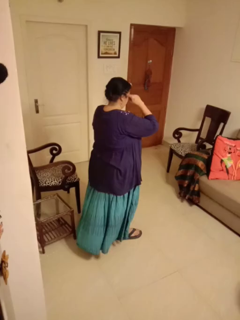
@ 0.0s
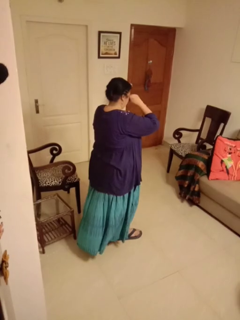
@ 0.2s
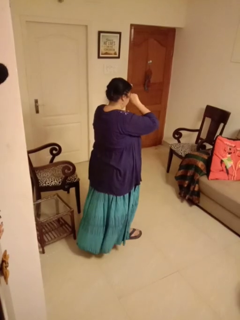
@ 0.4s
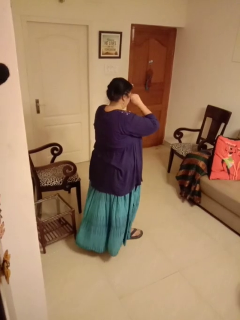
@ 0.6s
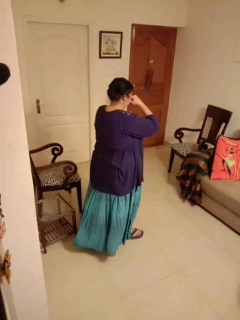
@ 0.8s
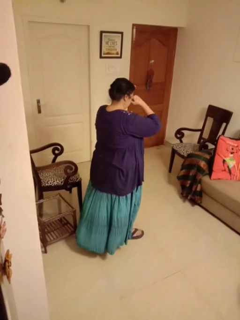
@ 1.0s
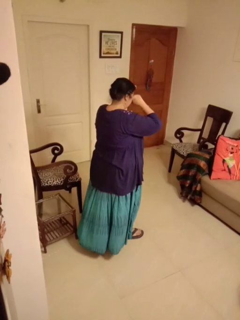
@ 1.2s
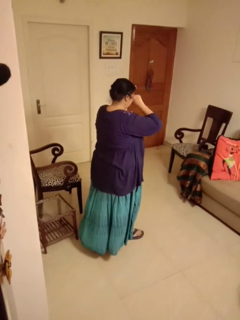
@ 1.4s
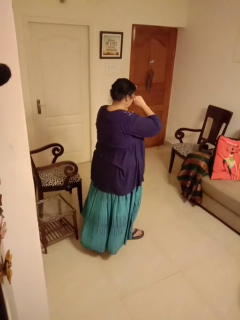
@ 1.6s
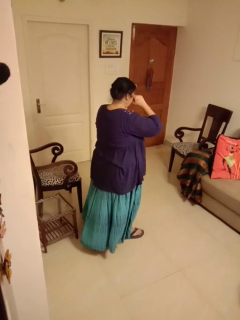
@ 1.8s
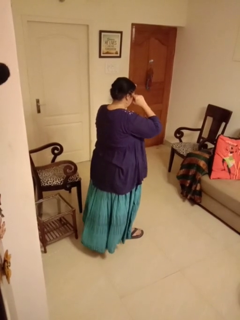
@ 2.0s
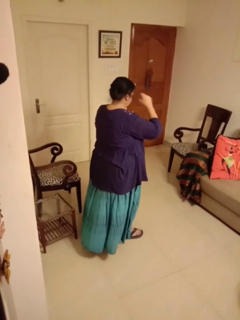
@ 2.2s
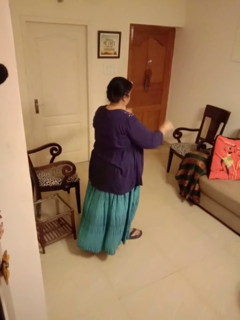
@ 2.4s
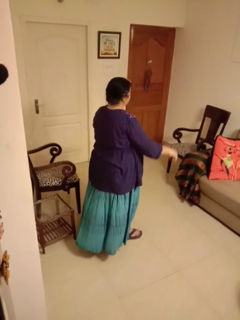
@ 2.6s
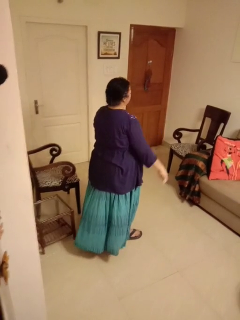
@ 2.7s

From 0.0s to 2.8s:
person rubs eyes

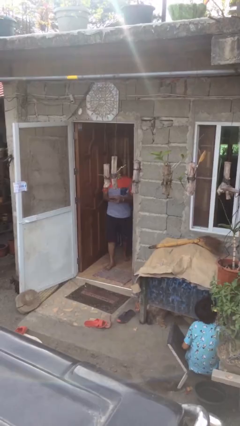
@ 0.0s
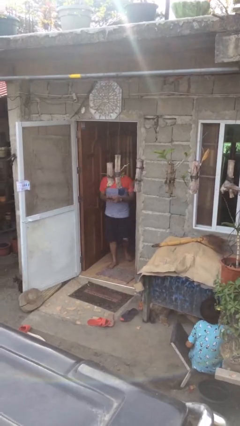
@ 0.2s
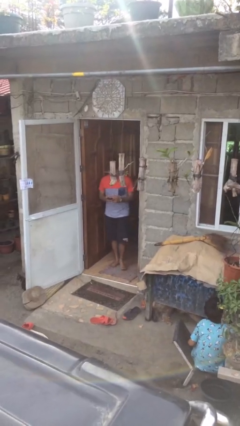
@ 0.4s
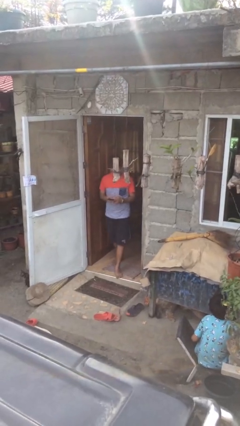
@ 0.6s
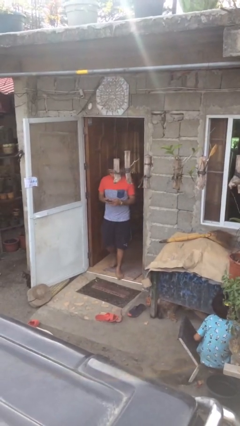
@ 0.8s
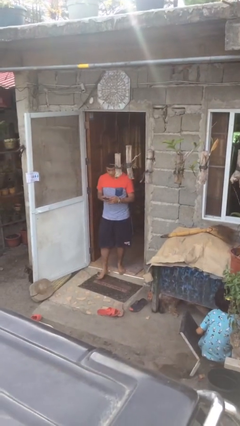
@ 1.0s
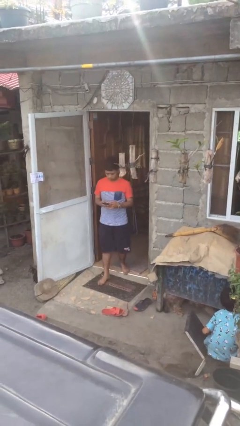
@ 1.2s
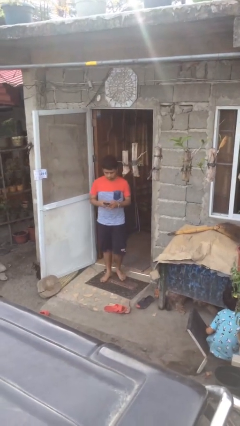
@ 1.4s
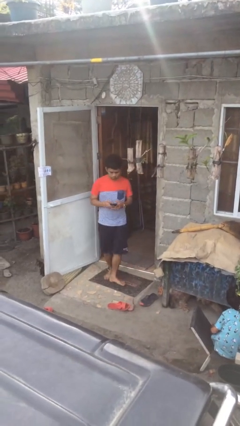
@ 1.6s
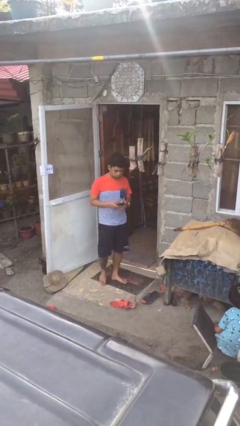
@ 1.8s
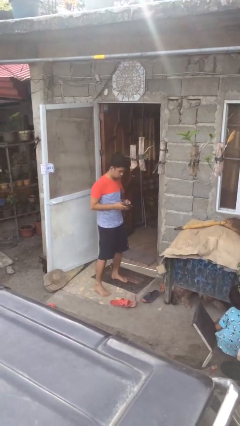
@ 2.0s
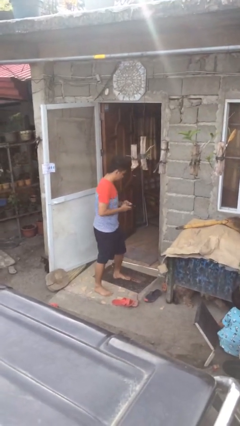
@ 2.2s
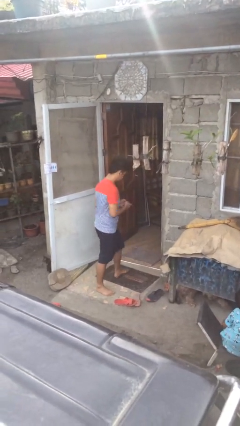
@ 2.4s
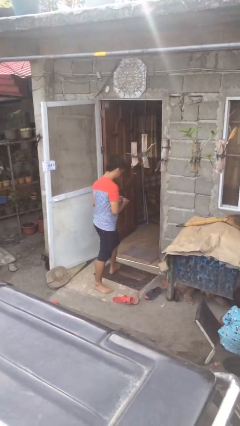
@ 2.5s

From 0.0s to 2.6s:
person enters scene through structure

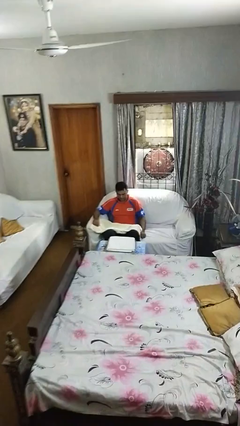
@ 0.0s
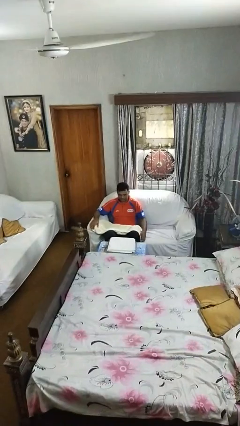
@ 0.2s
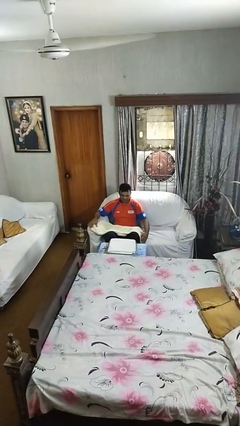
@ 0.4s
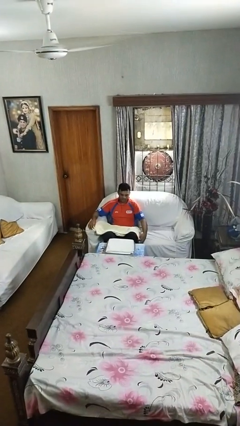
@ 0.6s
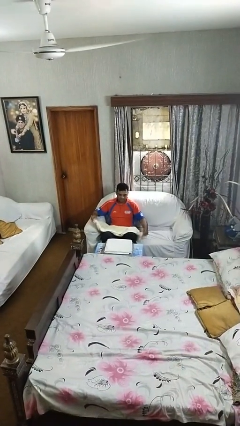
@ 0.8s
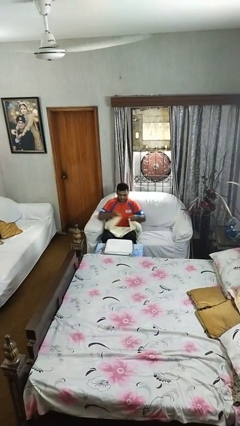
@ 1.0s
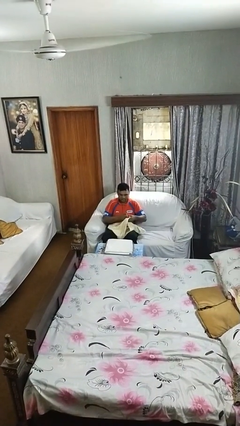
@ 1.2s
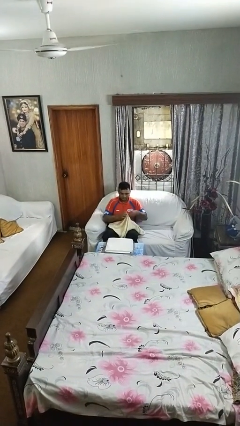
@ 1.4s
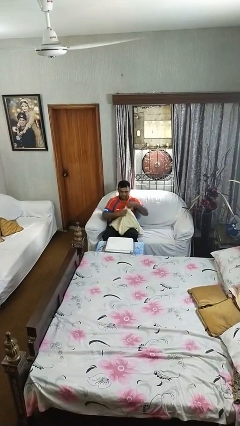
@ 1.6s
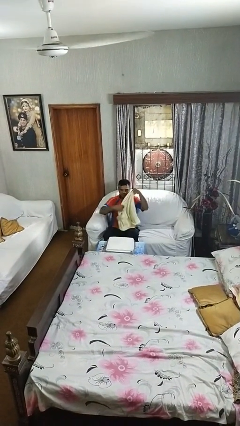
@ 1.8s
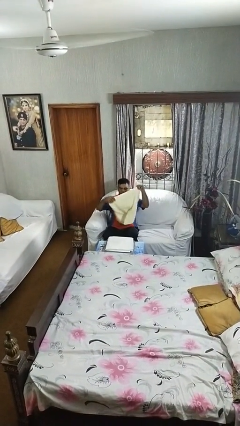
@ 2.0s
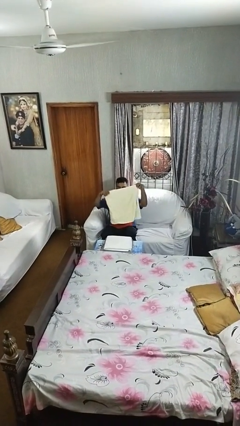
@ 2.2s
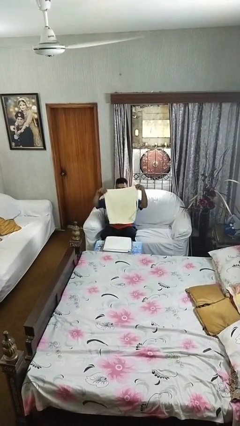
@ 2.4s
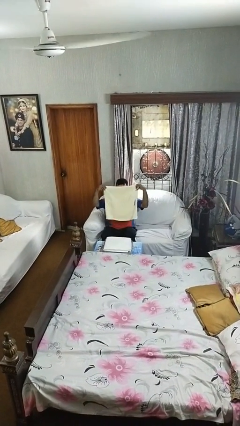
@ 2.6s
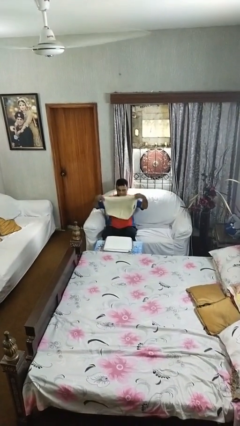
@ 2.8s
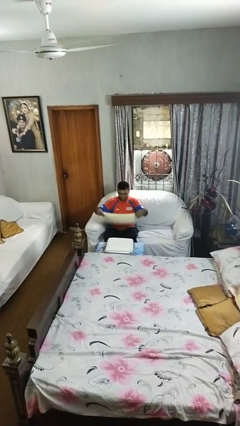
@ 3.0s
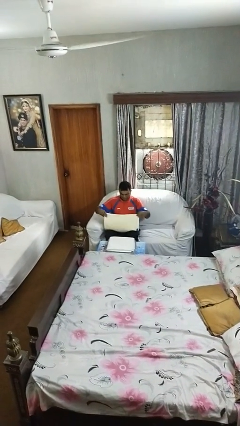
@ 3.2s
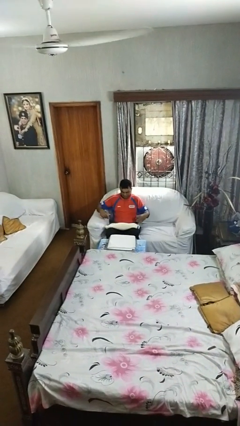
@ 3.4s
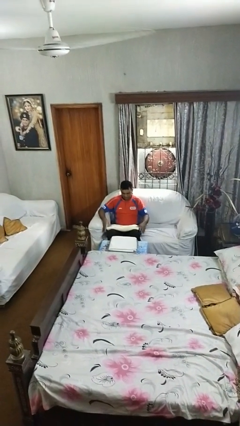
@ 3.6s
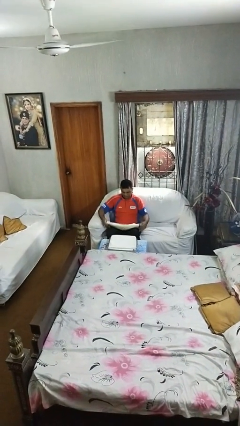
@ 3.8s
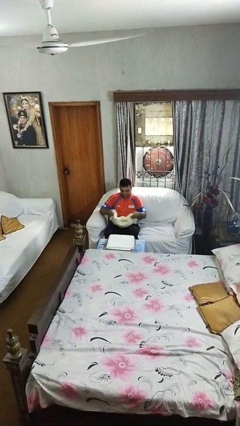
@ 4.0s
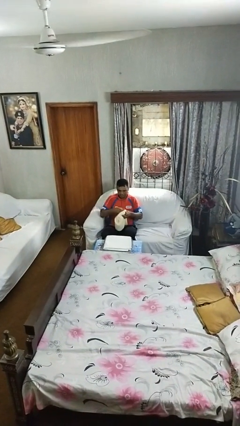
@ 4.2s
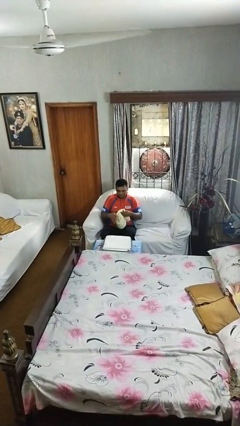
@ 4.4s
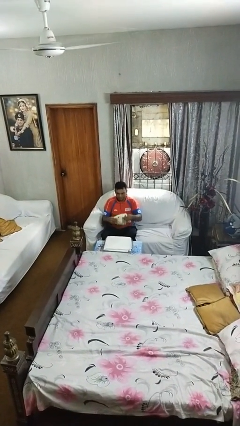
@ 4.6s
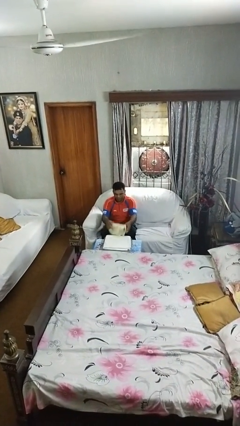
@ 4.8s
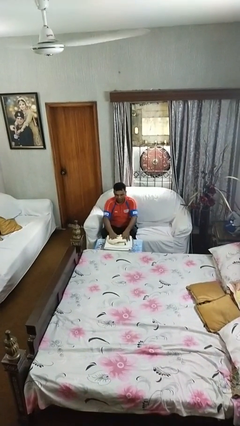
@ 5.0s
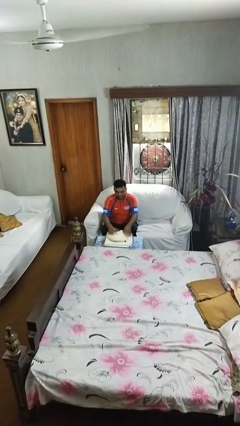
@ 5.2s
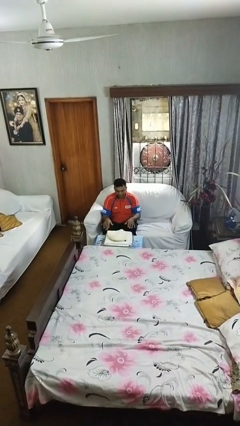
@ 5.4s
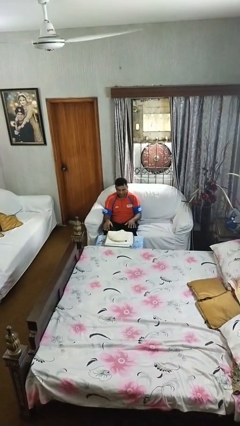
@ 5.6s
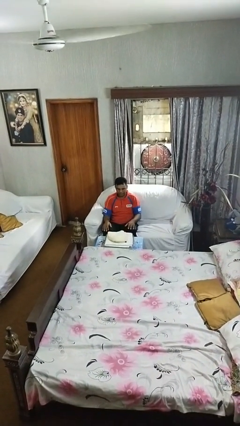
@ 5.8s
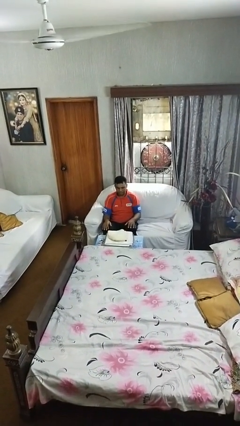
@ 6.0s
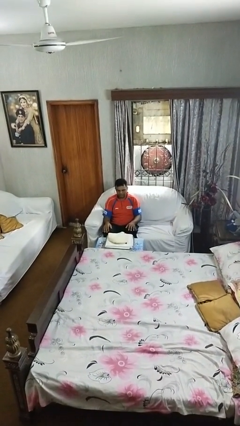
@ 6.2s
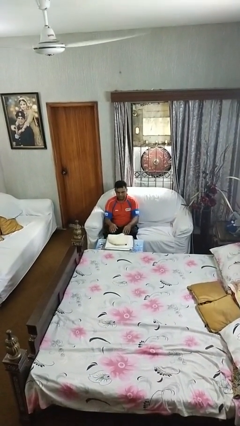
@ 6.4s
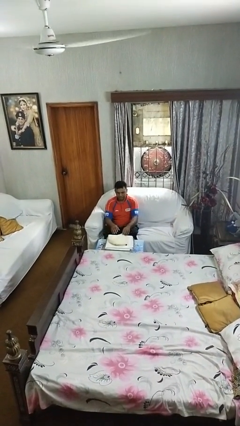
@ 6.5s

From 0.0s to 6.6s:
person folds towel

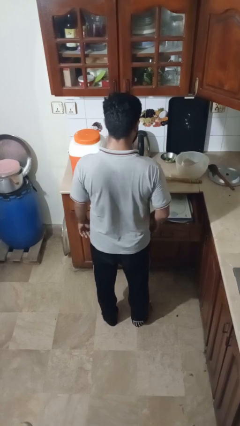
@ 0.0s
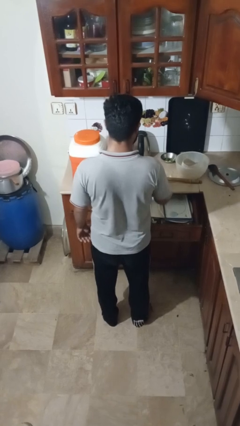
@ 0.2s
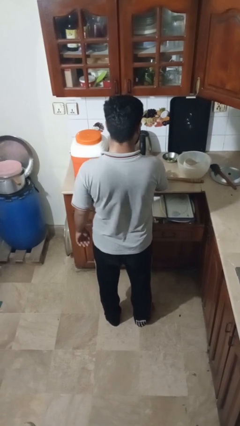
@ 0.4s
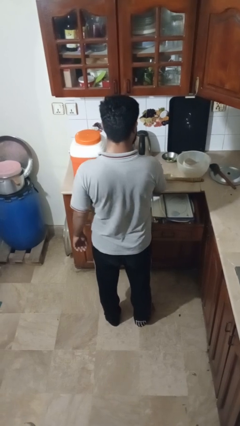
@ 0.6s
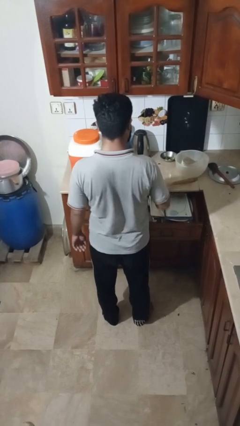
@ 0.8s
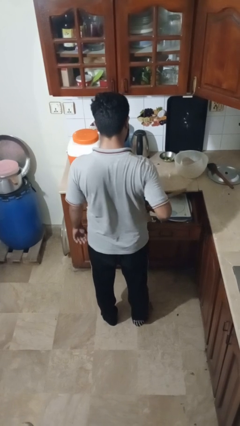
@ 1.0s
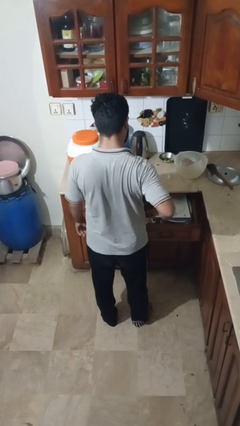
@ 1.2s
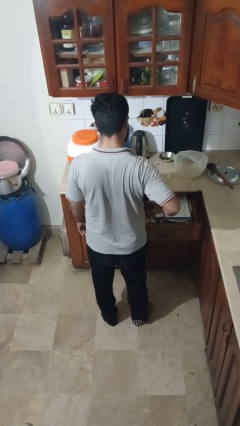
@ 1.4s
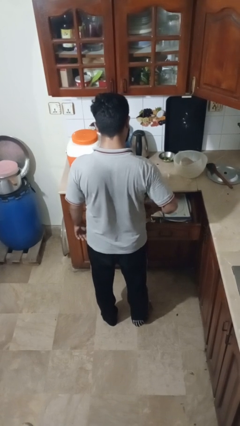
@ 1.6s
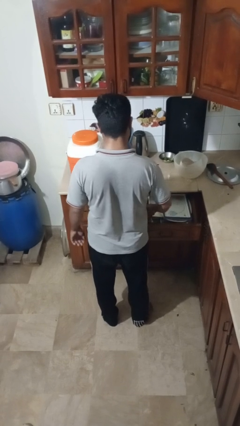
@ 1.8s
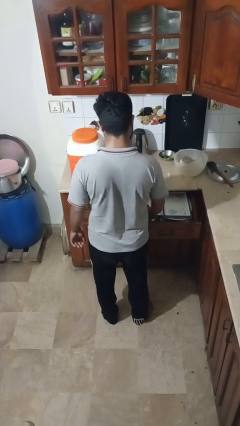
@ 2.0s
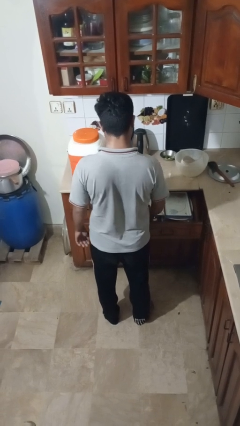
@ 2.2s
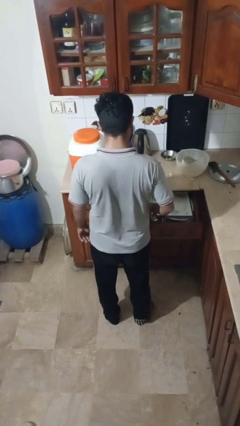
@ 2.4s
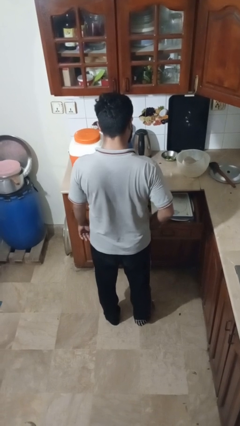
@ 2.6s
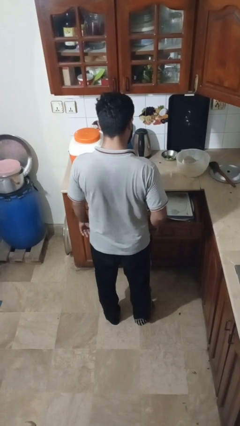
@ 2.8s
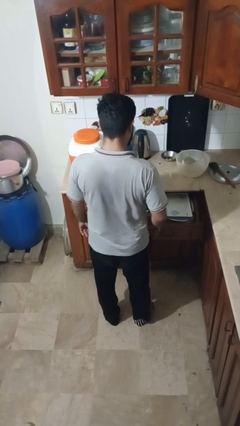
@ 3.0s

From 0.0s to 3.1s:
person puts object into kitchen drawer

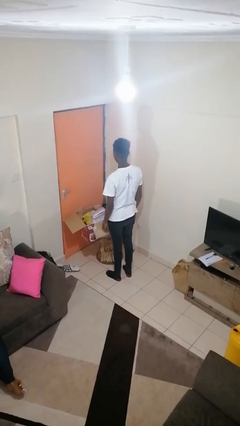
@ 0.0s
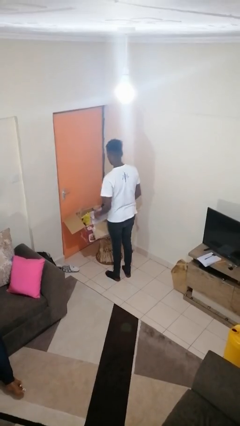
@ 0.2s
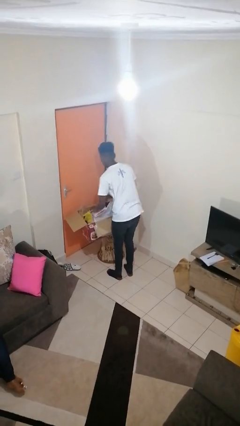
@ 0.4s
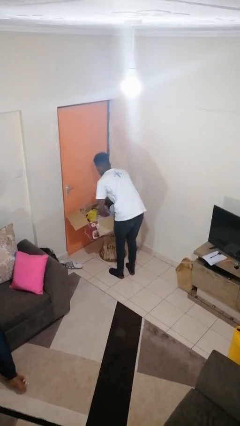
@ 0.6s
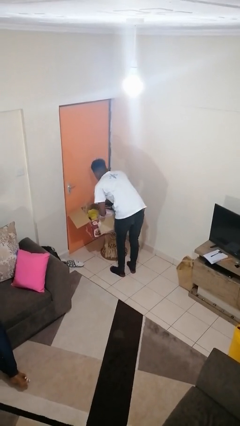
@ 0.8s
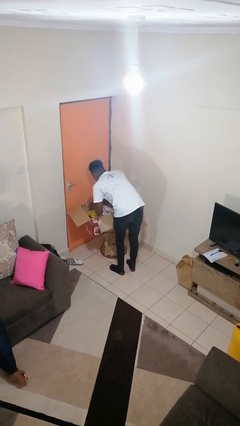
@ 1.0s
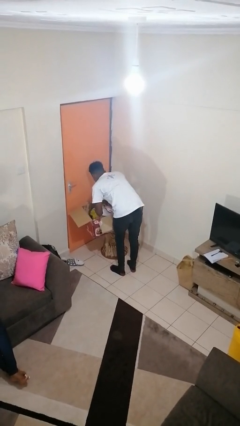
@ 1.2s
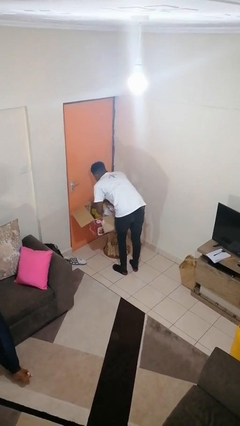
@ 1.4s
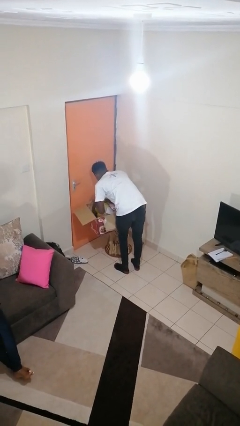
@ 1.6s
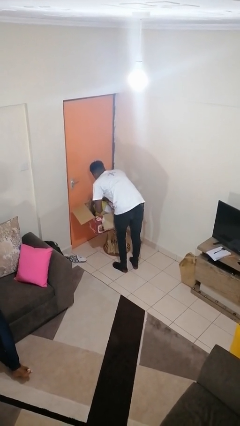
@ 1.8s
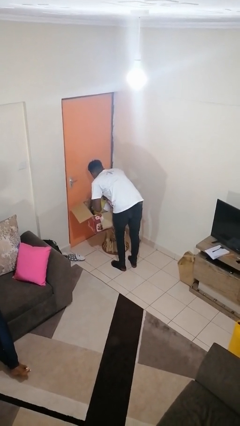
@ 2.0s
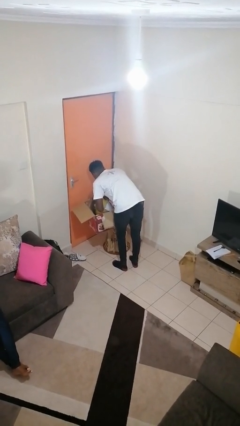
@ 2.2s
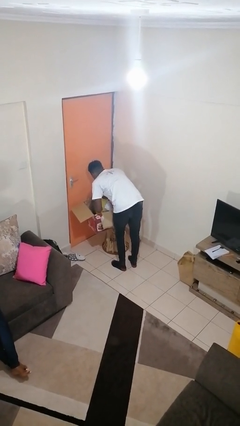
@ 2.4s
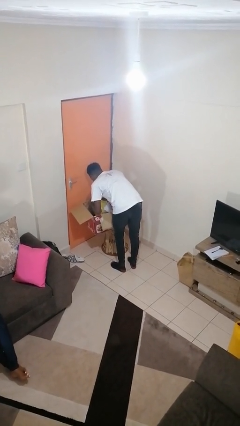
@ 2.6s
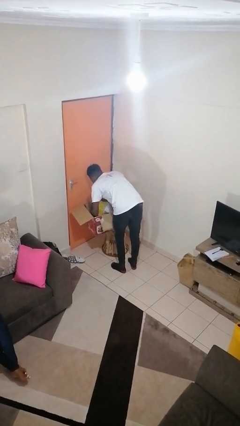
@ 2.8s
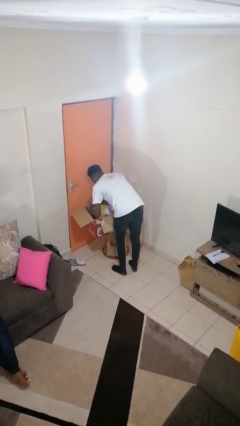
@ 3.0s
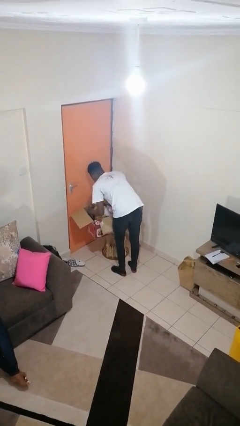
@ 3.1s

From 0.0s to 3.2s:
person searches in box

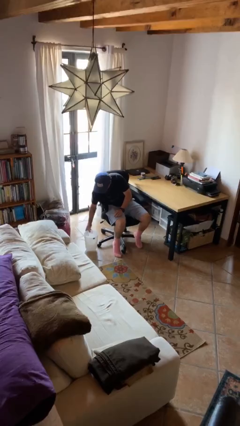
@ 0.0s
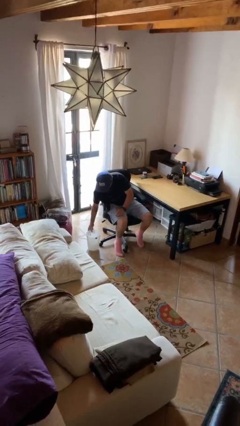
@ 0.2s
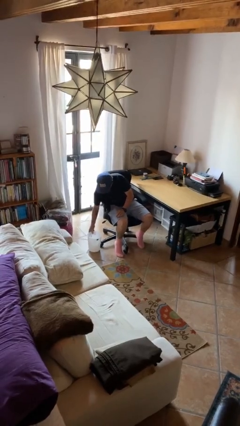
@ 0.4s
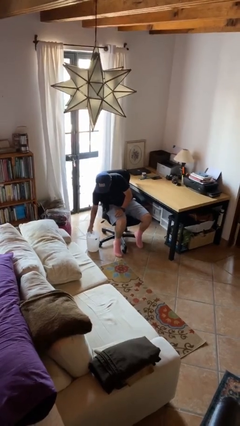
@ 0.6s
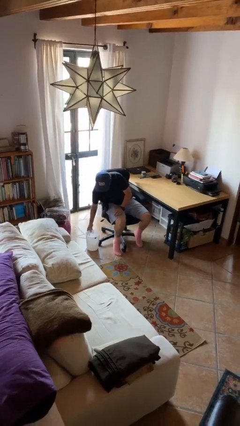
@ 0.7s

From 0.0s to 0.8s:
person puts down object on floor
